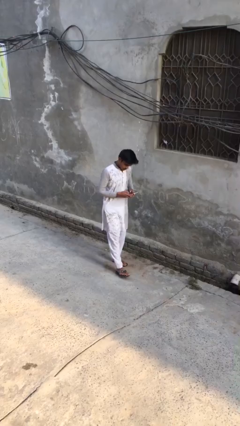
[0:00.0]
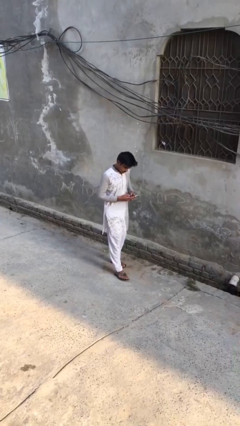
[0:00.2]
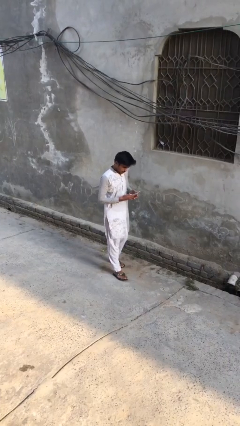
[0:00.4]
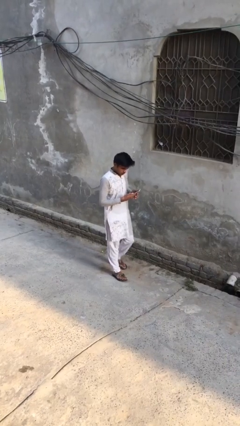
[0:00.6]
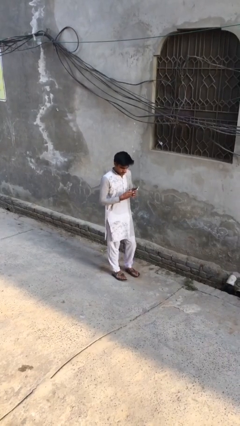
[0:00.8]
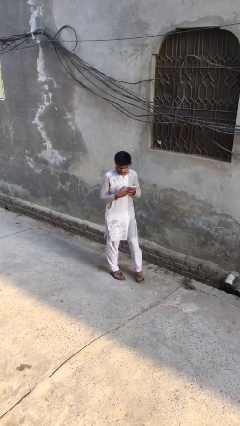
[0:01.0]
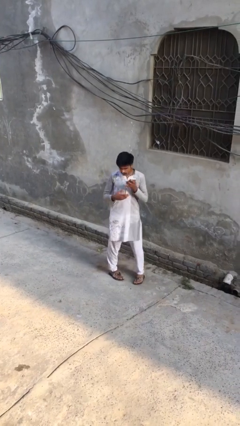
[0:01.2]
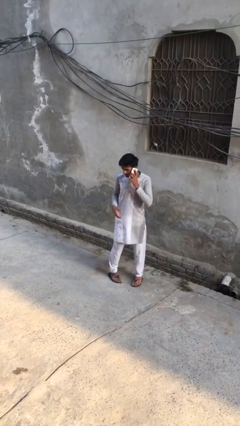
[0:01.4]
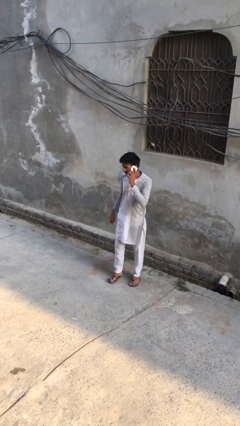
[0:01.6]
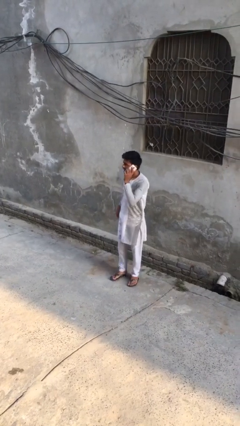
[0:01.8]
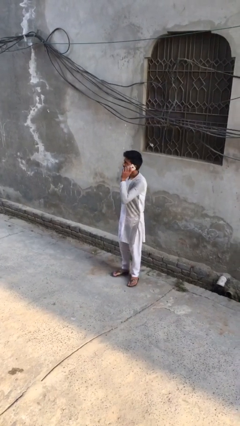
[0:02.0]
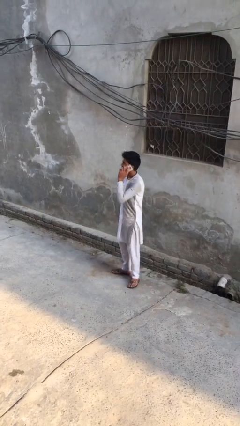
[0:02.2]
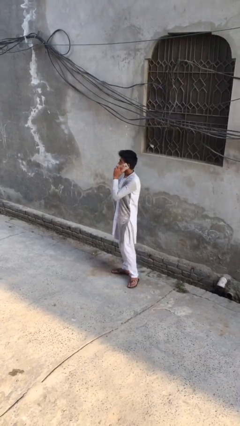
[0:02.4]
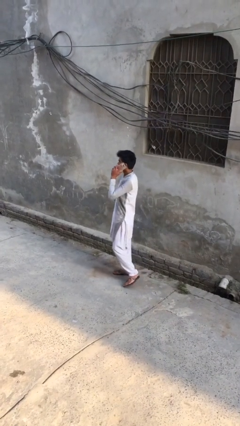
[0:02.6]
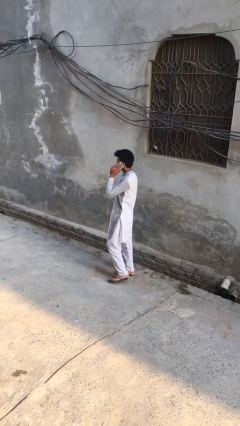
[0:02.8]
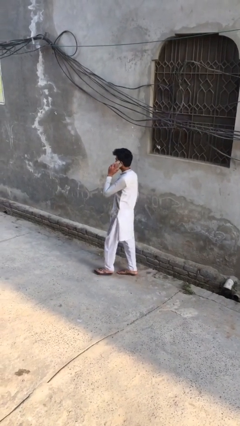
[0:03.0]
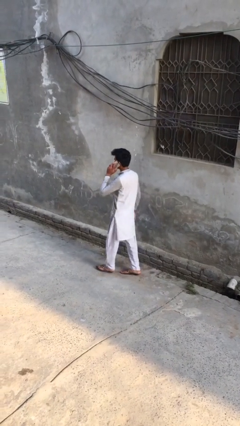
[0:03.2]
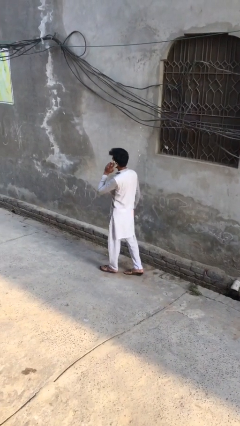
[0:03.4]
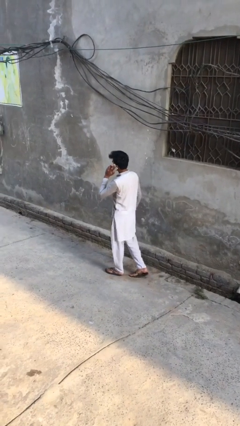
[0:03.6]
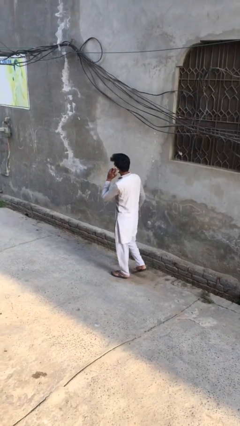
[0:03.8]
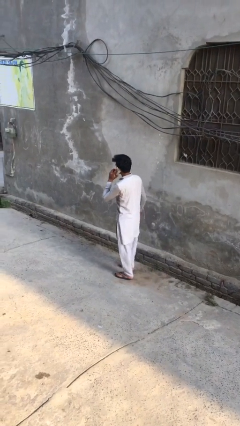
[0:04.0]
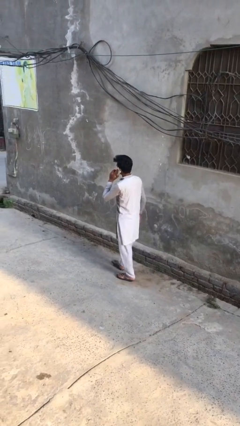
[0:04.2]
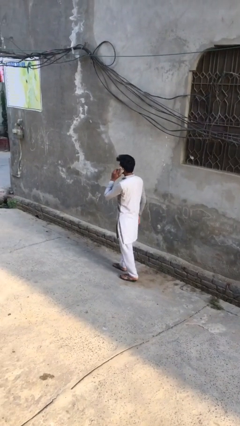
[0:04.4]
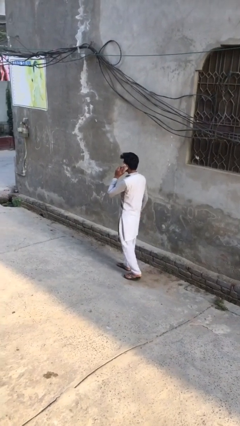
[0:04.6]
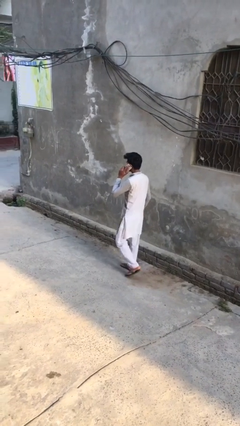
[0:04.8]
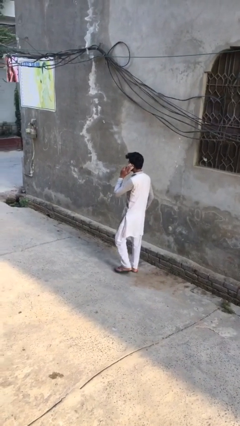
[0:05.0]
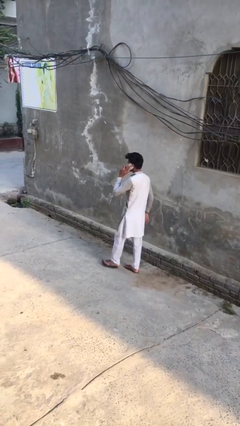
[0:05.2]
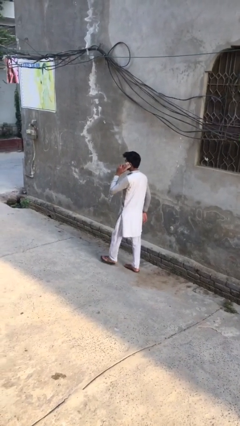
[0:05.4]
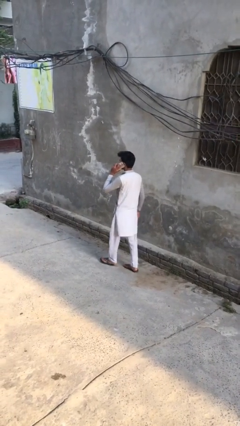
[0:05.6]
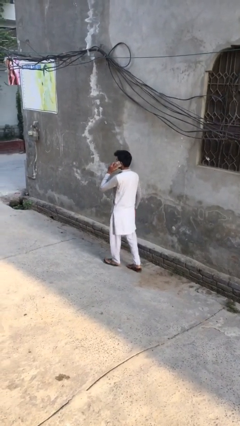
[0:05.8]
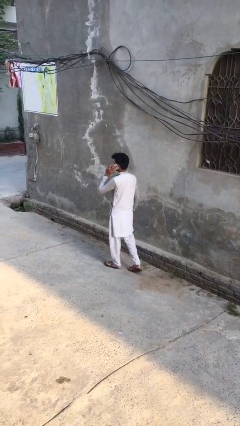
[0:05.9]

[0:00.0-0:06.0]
person talks on phone

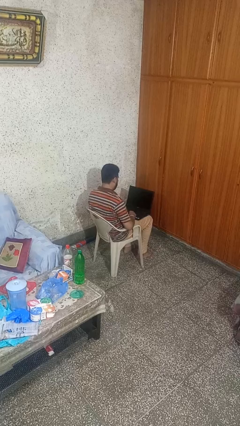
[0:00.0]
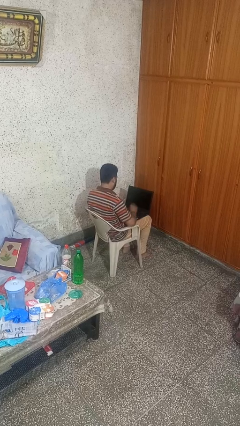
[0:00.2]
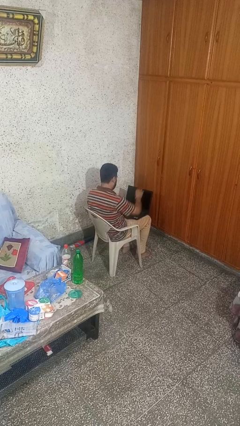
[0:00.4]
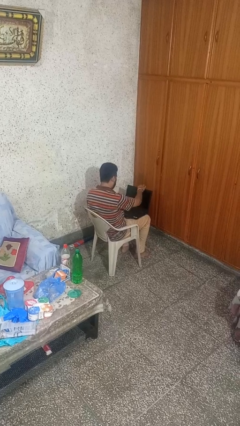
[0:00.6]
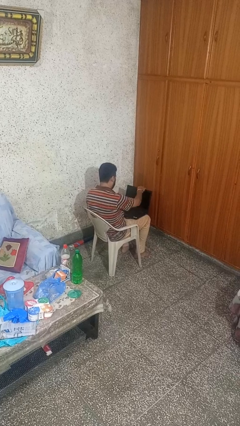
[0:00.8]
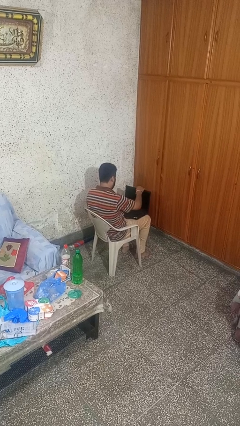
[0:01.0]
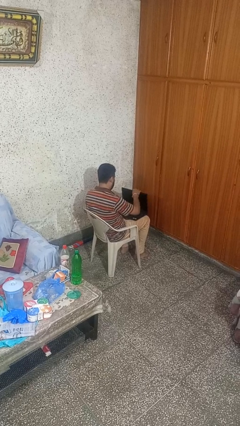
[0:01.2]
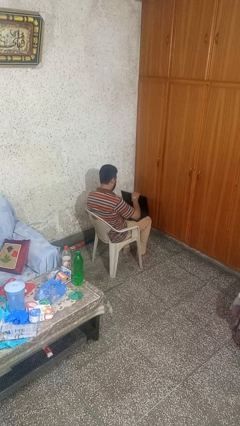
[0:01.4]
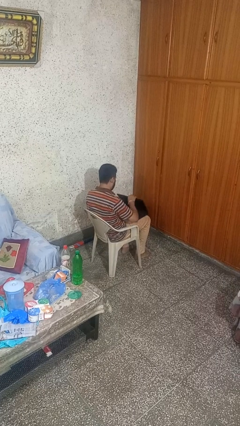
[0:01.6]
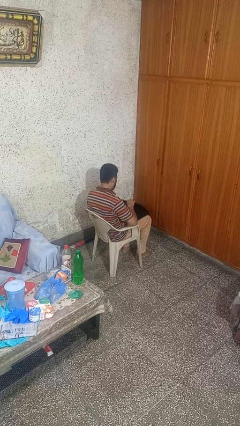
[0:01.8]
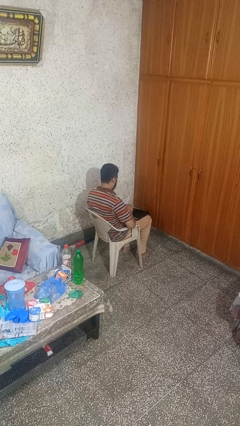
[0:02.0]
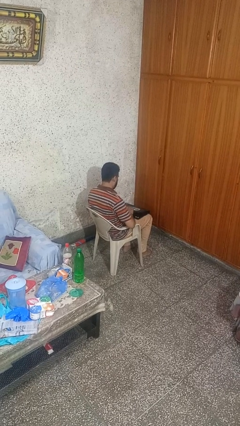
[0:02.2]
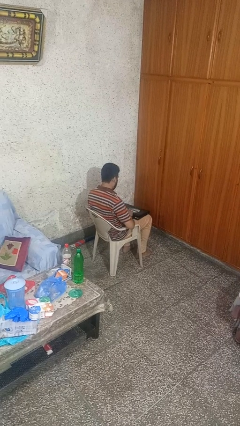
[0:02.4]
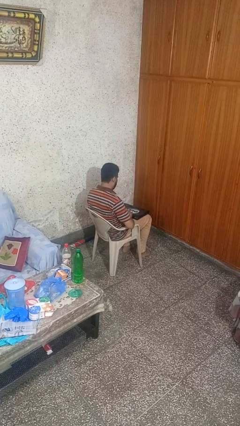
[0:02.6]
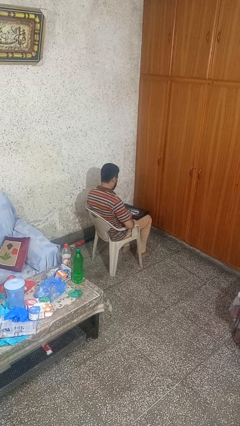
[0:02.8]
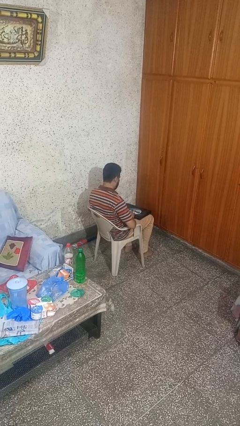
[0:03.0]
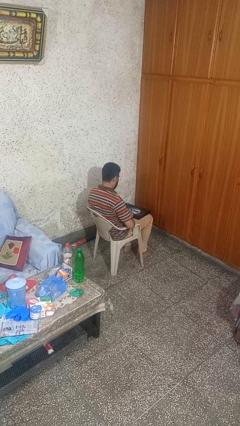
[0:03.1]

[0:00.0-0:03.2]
person closes laptop

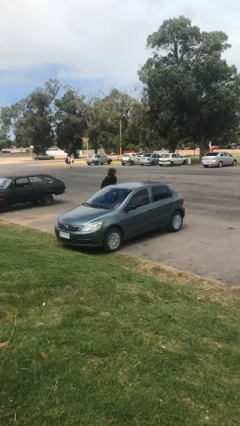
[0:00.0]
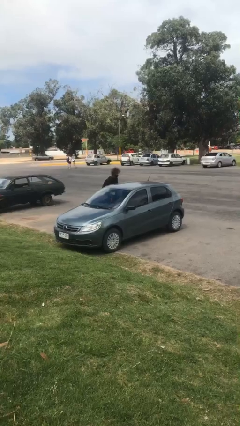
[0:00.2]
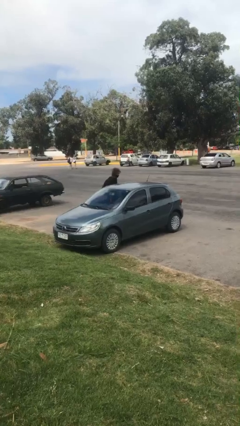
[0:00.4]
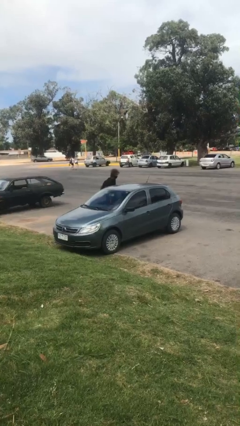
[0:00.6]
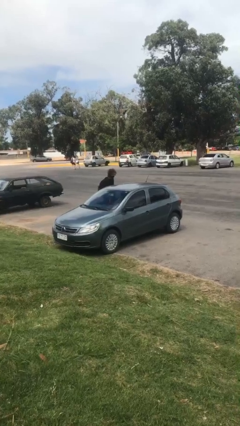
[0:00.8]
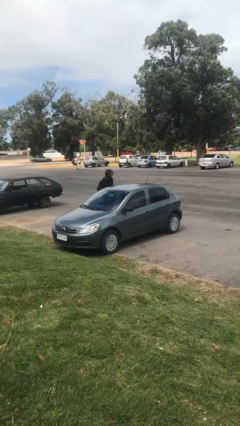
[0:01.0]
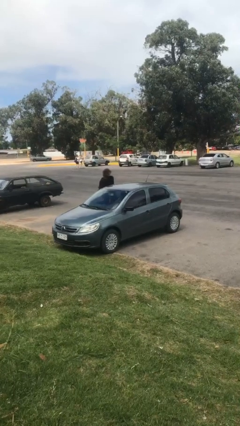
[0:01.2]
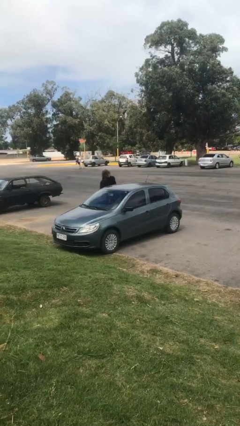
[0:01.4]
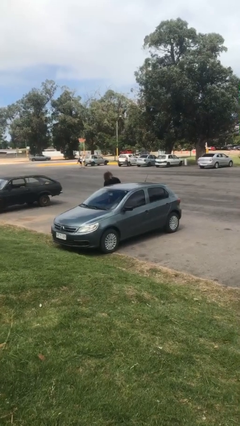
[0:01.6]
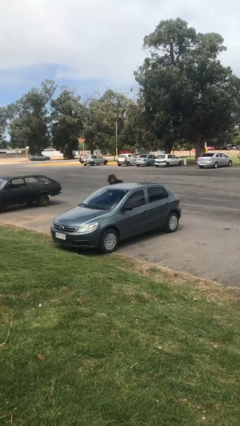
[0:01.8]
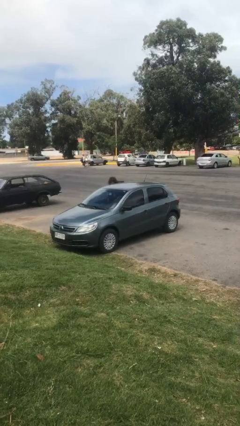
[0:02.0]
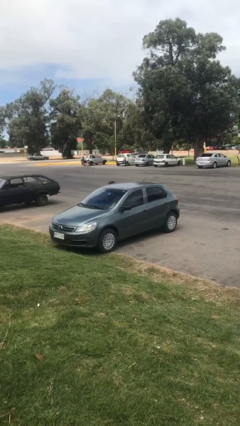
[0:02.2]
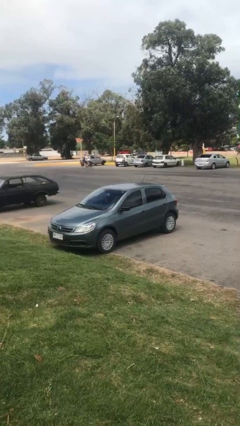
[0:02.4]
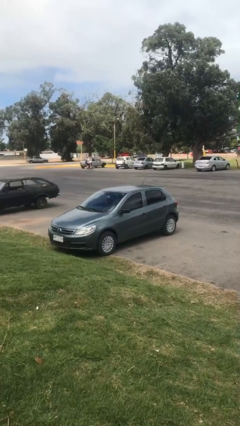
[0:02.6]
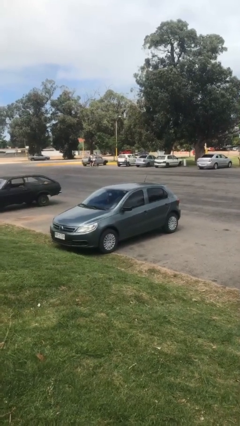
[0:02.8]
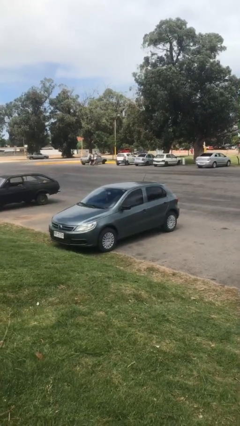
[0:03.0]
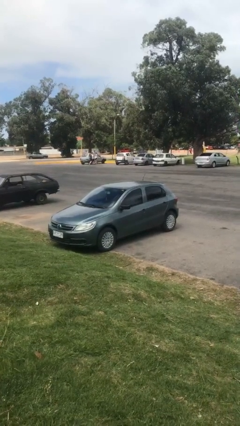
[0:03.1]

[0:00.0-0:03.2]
car picks up person

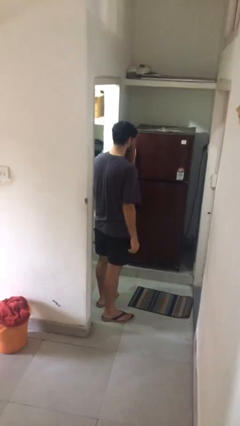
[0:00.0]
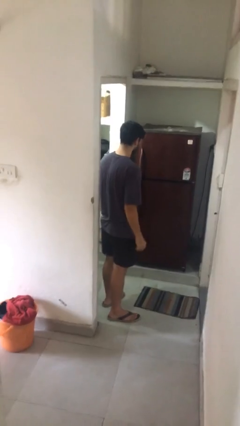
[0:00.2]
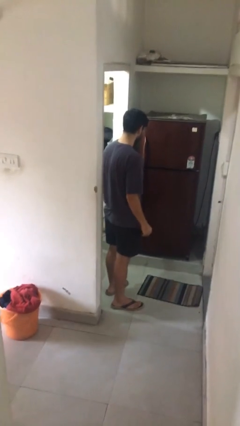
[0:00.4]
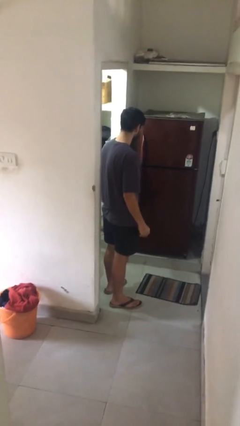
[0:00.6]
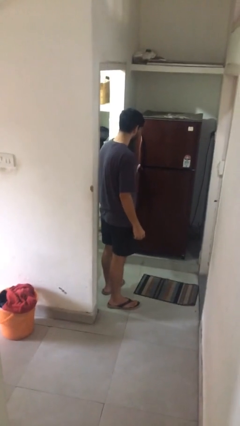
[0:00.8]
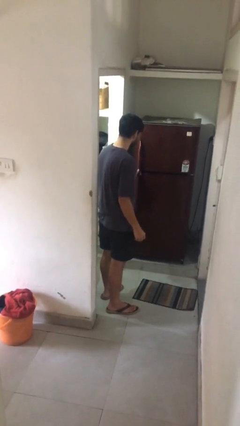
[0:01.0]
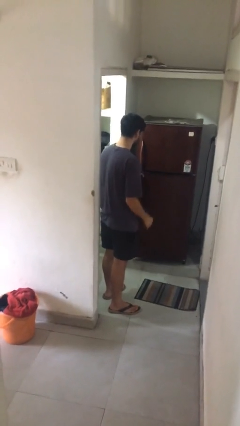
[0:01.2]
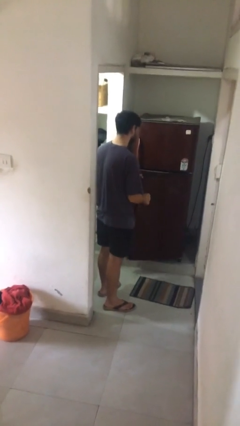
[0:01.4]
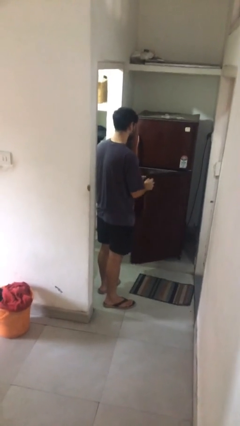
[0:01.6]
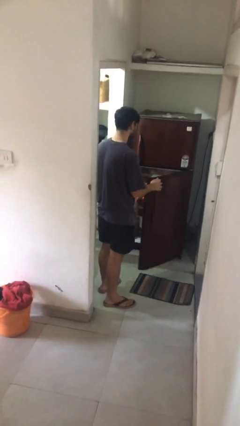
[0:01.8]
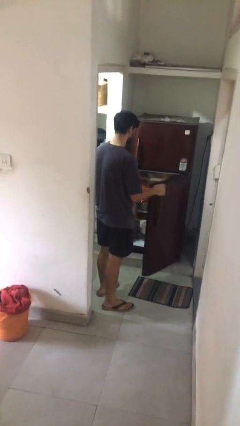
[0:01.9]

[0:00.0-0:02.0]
person opens refrigerator

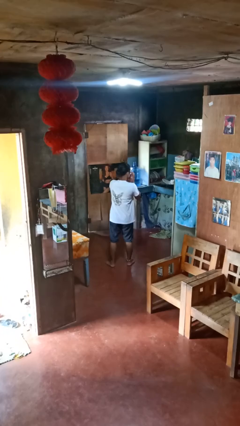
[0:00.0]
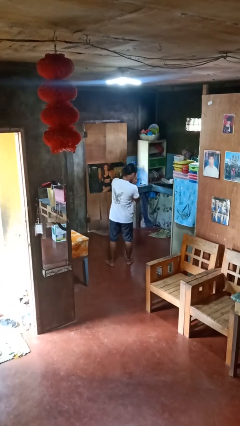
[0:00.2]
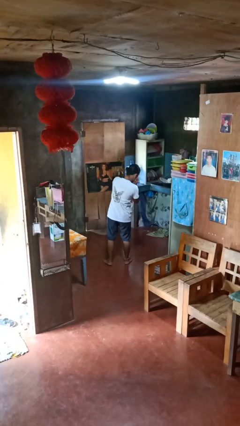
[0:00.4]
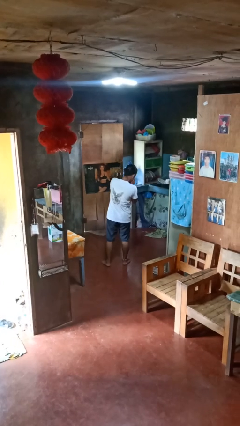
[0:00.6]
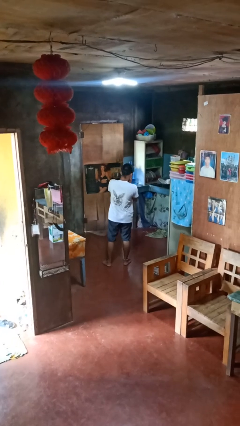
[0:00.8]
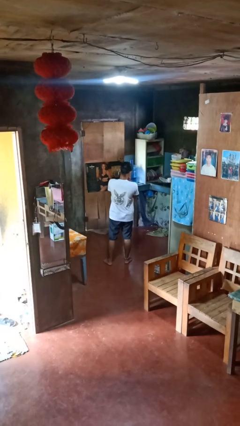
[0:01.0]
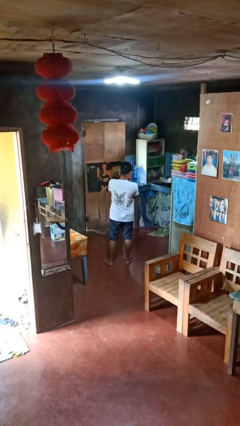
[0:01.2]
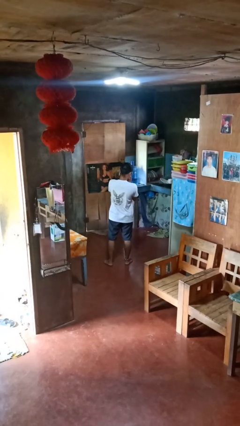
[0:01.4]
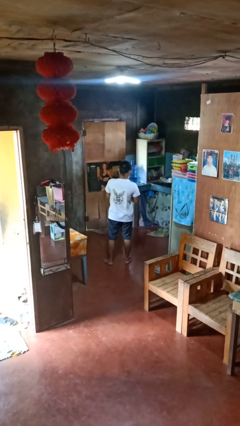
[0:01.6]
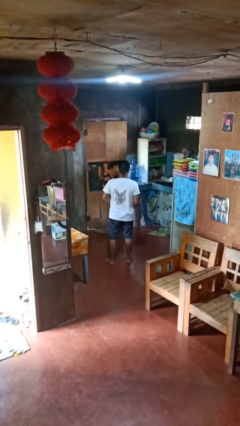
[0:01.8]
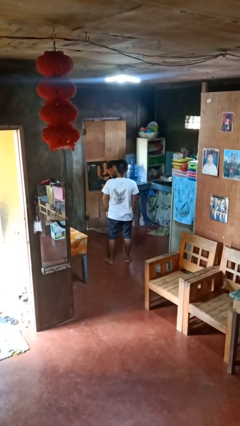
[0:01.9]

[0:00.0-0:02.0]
person sneezes into hand

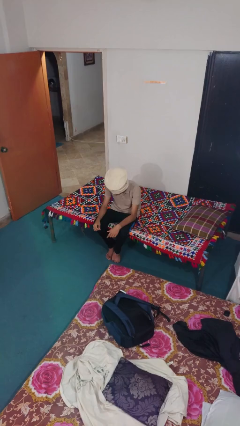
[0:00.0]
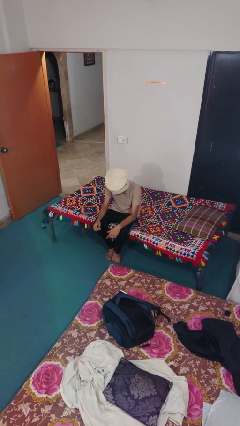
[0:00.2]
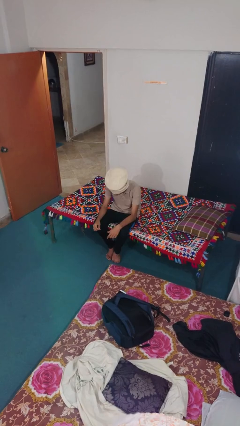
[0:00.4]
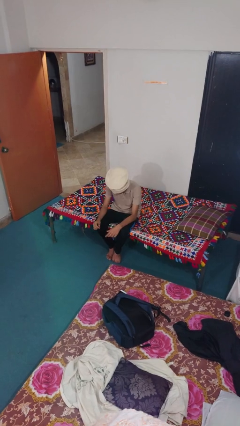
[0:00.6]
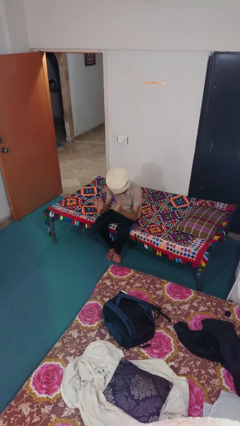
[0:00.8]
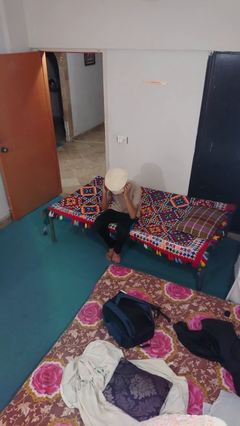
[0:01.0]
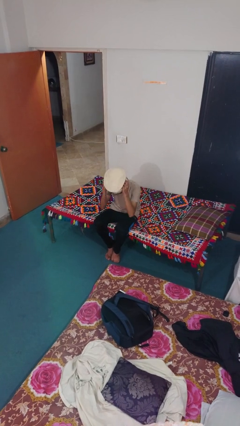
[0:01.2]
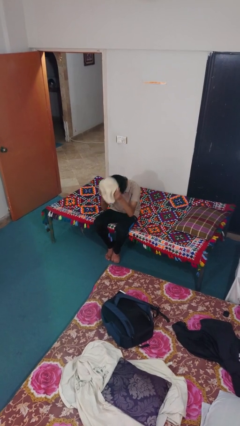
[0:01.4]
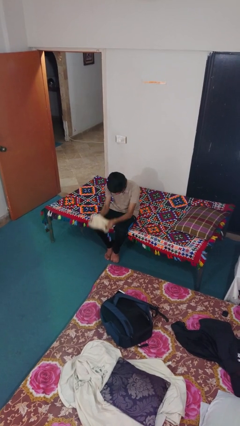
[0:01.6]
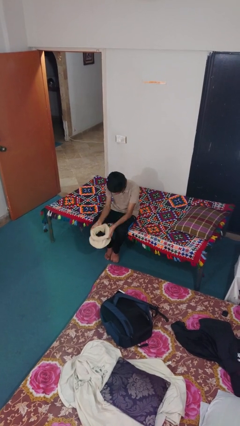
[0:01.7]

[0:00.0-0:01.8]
person takes off hat
